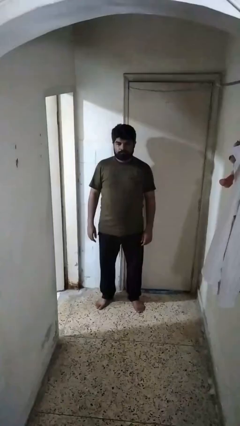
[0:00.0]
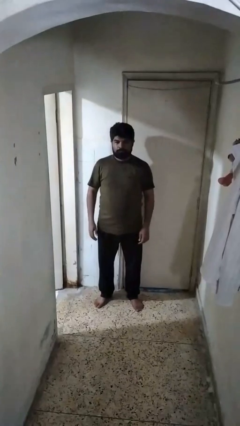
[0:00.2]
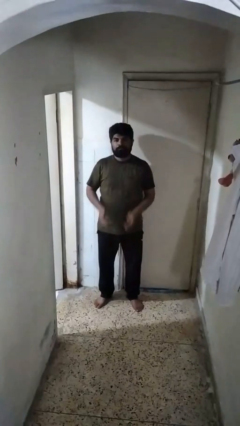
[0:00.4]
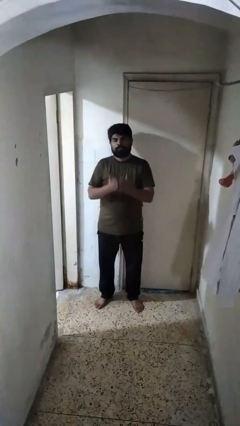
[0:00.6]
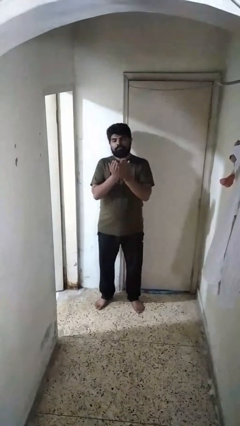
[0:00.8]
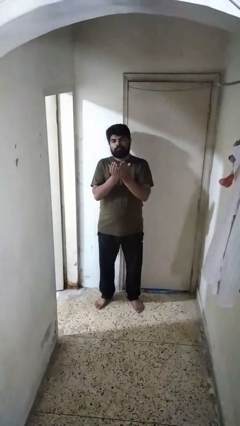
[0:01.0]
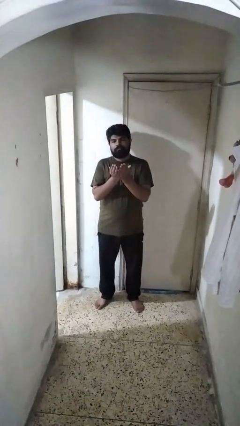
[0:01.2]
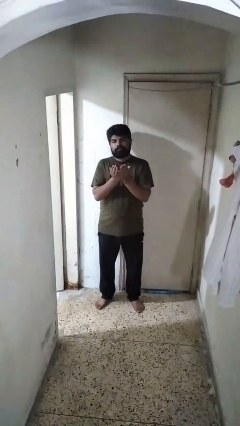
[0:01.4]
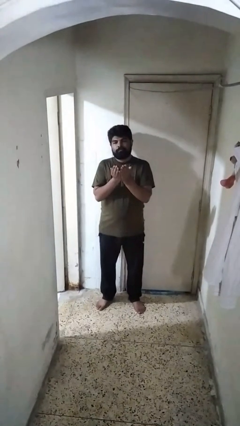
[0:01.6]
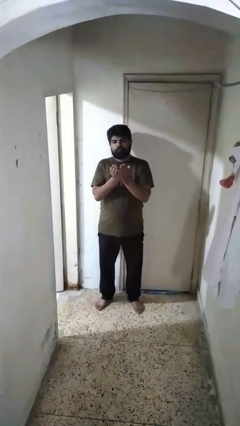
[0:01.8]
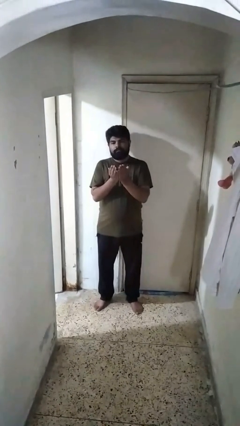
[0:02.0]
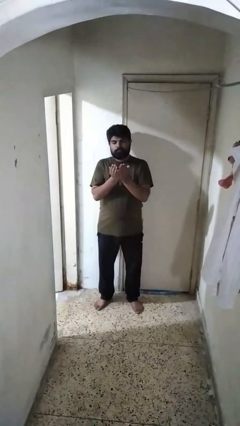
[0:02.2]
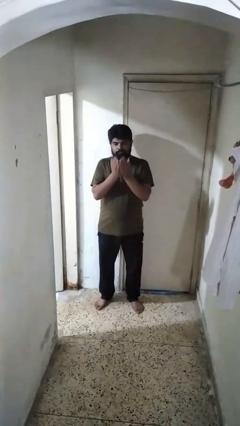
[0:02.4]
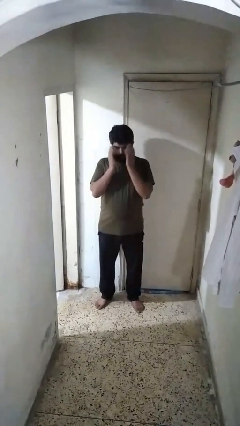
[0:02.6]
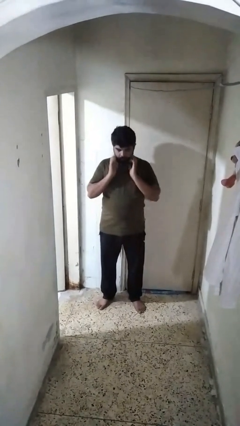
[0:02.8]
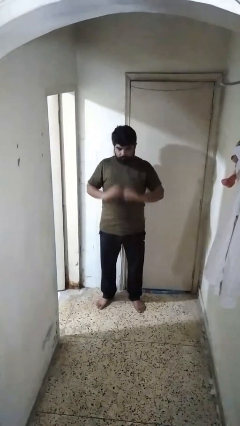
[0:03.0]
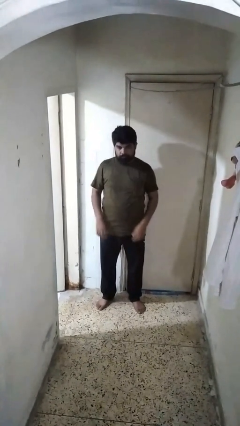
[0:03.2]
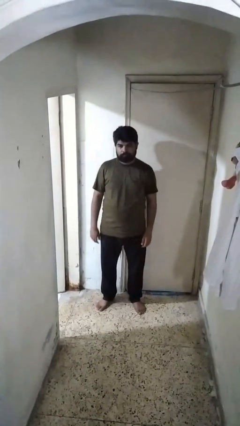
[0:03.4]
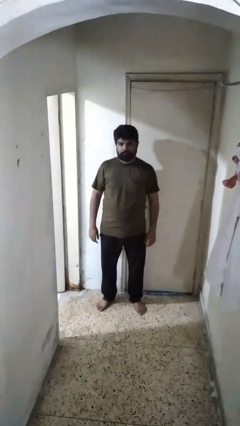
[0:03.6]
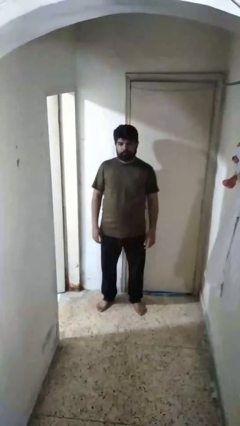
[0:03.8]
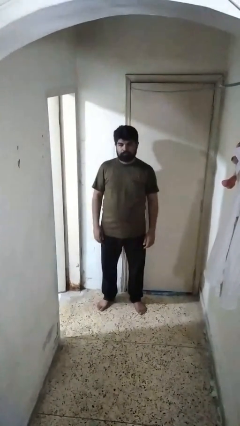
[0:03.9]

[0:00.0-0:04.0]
person prays

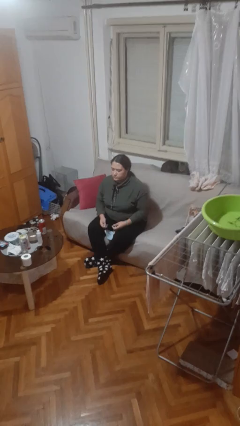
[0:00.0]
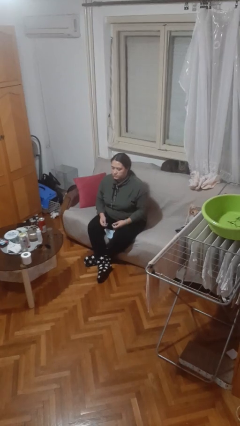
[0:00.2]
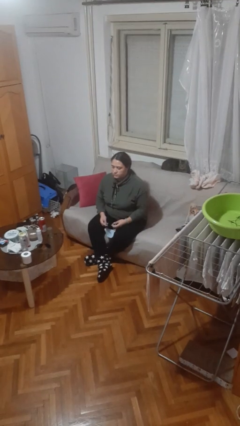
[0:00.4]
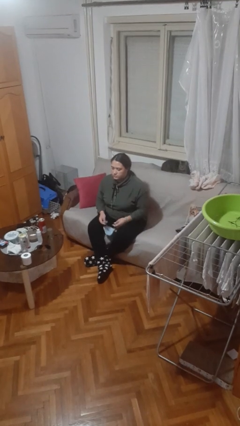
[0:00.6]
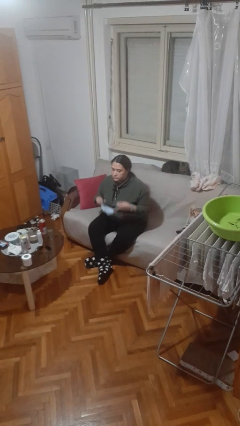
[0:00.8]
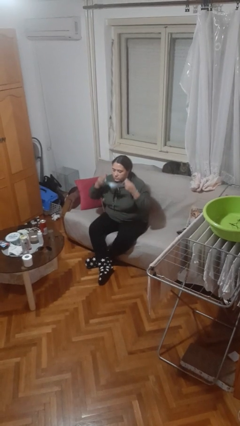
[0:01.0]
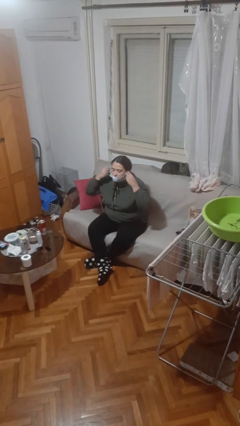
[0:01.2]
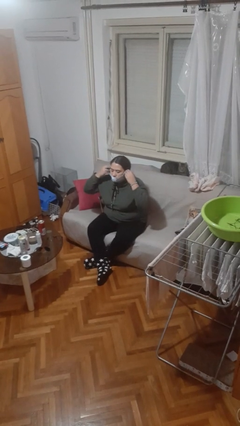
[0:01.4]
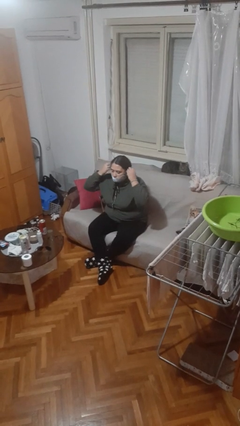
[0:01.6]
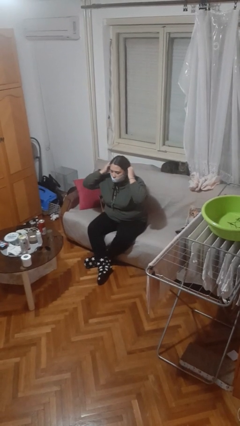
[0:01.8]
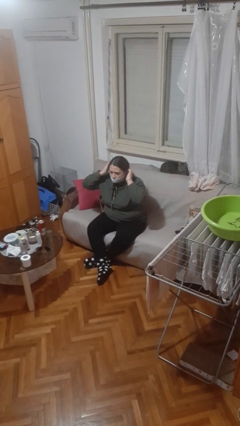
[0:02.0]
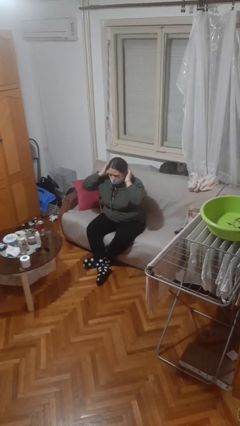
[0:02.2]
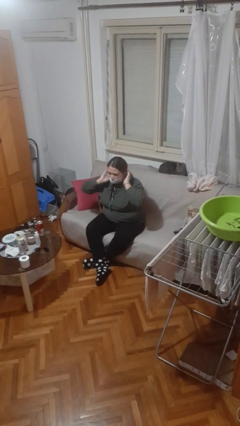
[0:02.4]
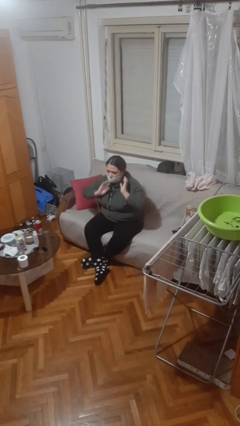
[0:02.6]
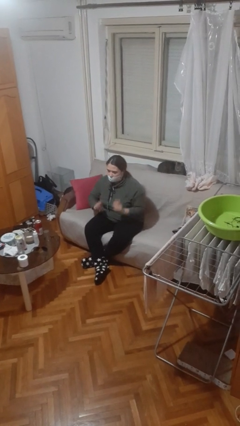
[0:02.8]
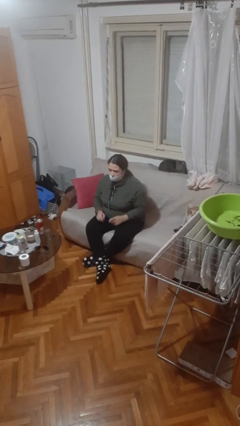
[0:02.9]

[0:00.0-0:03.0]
person puts on facemask

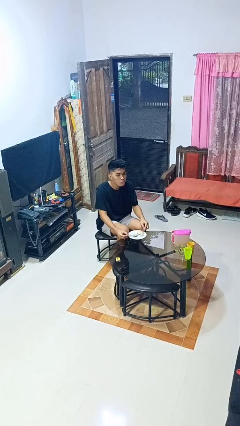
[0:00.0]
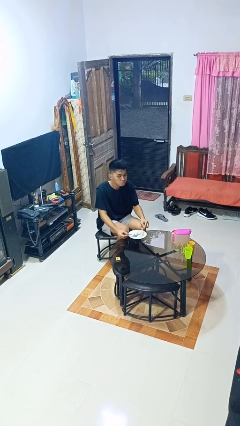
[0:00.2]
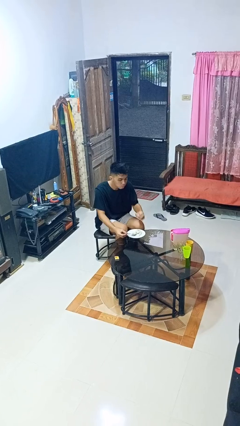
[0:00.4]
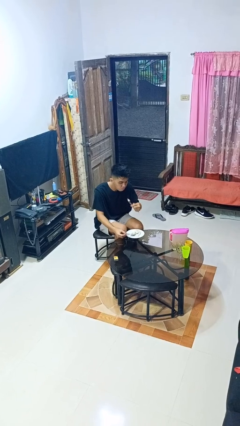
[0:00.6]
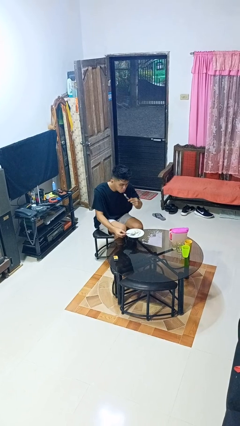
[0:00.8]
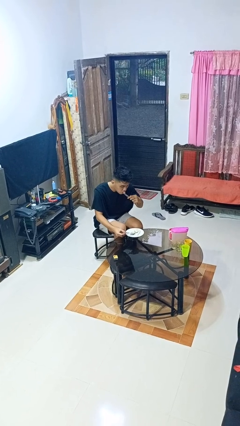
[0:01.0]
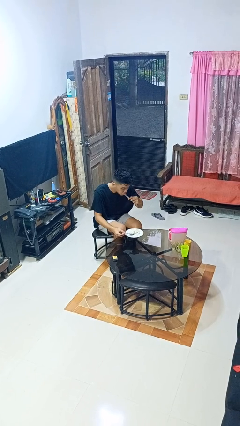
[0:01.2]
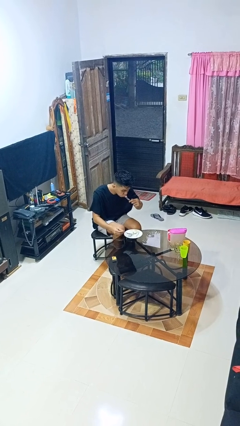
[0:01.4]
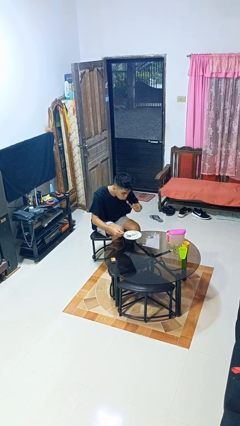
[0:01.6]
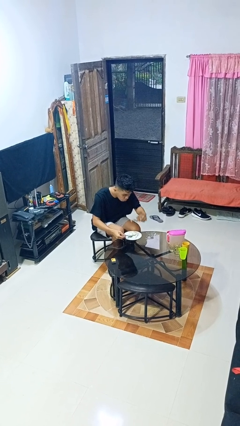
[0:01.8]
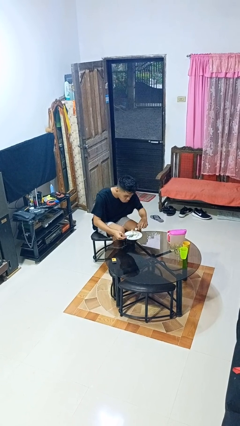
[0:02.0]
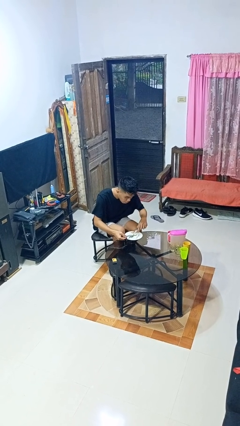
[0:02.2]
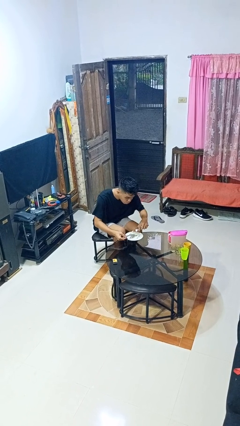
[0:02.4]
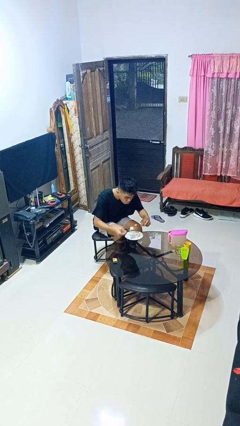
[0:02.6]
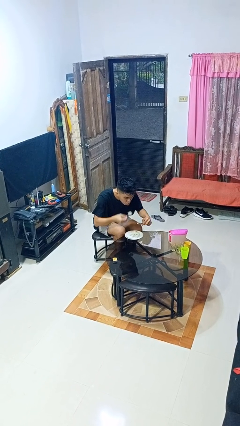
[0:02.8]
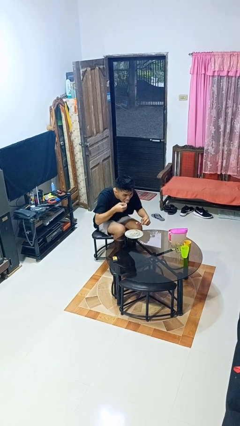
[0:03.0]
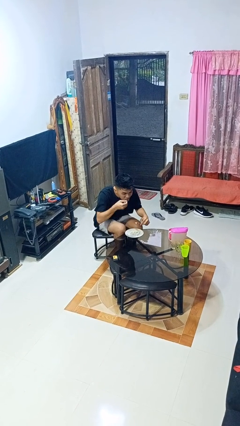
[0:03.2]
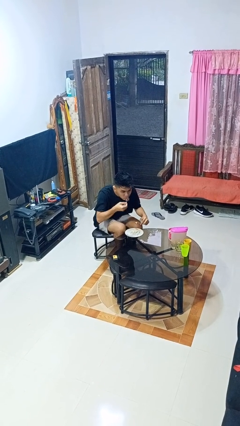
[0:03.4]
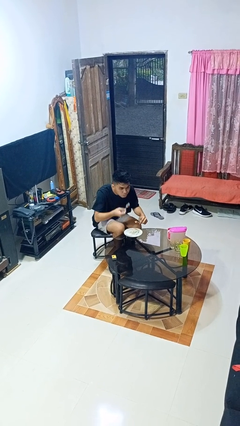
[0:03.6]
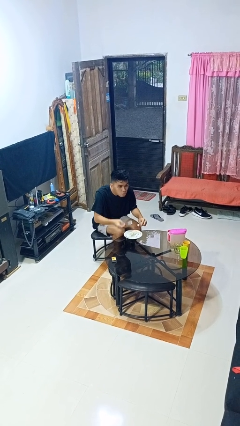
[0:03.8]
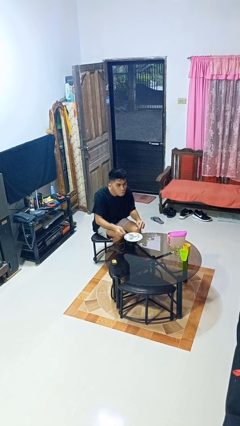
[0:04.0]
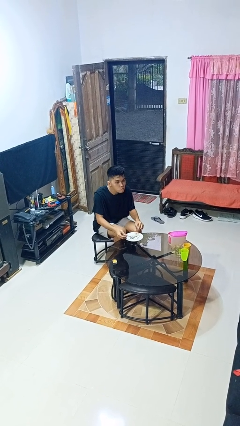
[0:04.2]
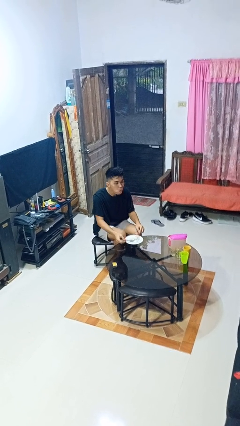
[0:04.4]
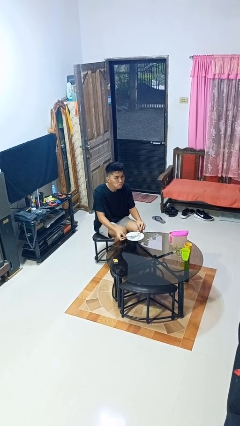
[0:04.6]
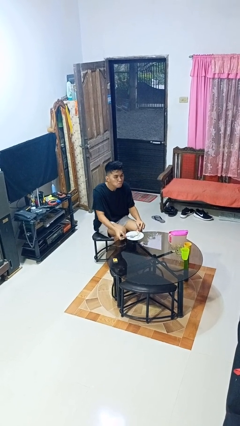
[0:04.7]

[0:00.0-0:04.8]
person eats with utensil

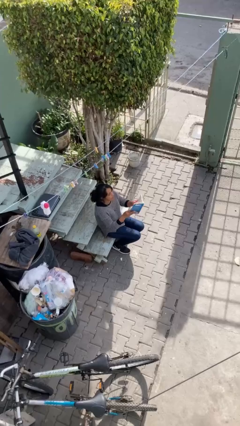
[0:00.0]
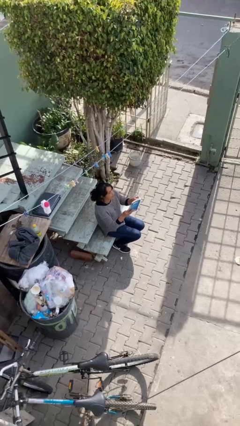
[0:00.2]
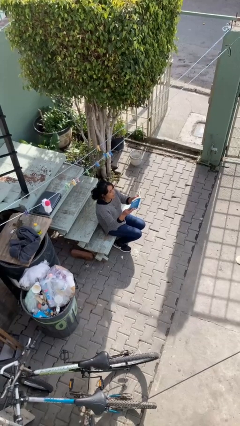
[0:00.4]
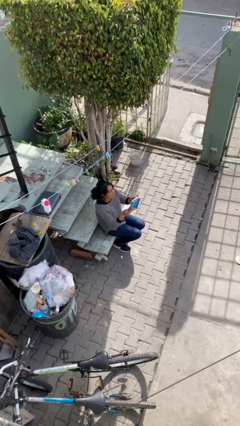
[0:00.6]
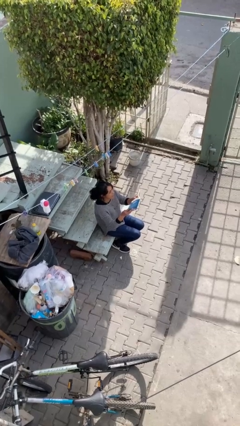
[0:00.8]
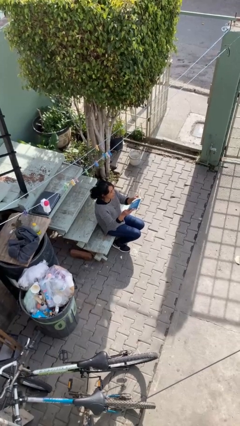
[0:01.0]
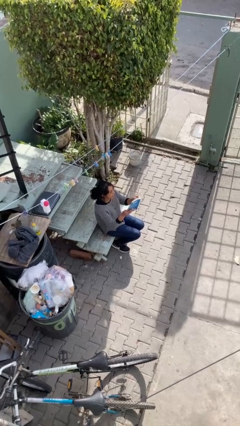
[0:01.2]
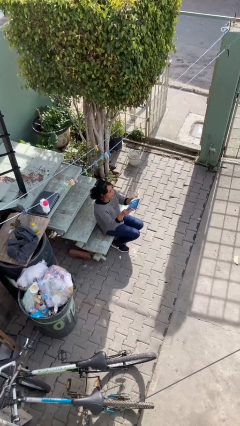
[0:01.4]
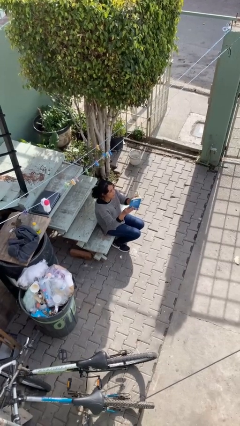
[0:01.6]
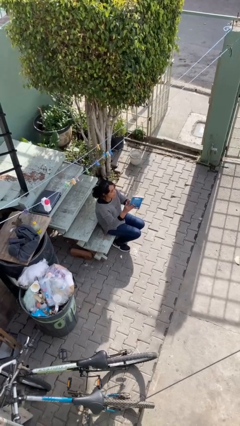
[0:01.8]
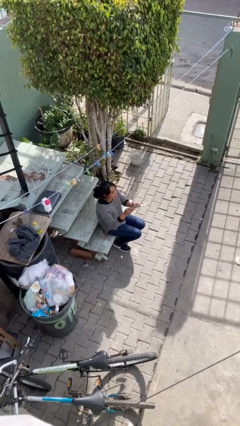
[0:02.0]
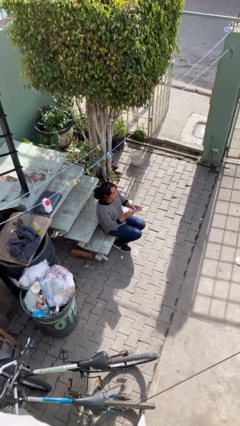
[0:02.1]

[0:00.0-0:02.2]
person reads document

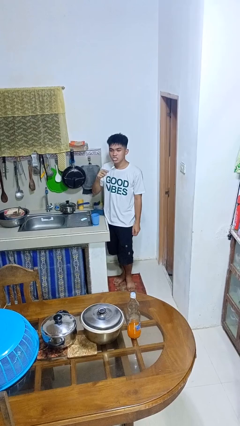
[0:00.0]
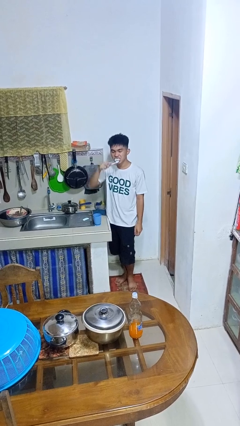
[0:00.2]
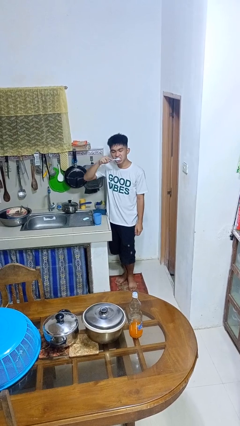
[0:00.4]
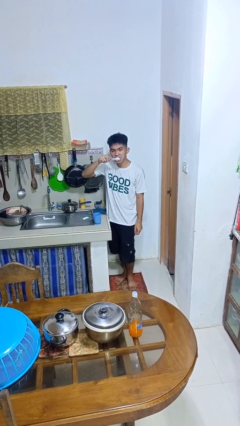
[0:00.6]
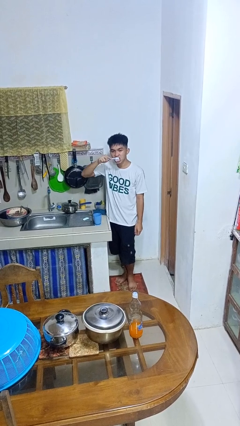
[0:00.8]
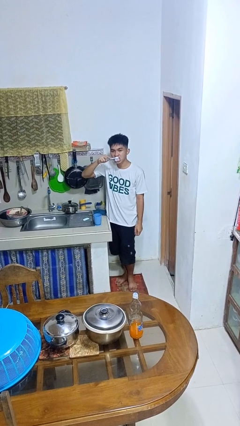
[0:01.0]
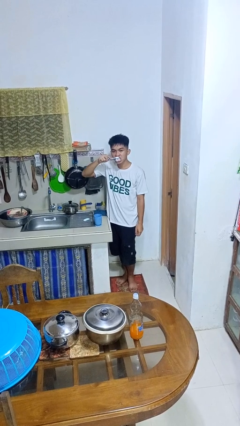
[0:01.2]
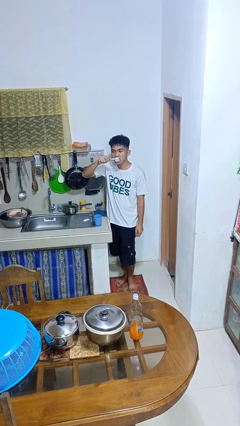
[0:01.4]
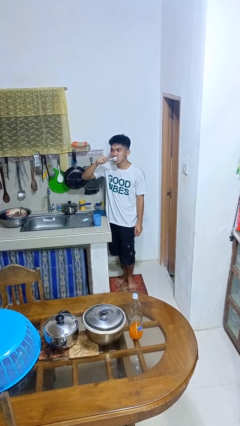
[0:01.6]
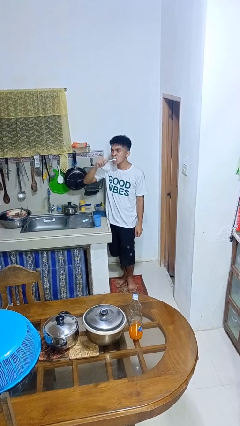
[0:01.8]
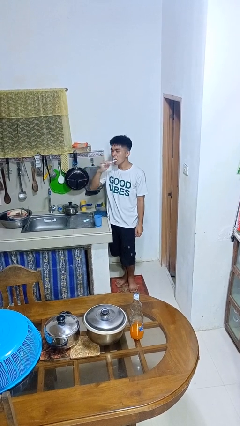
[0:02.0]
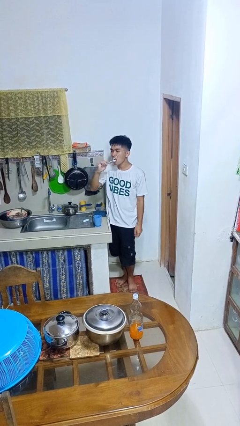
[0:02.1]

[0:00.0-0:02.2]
person brushes teeth

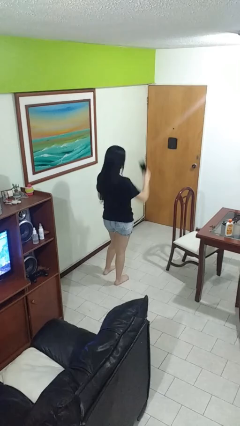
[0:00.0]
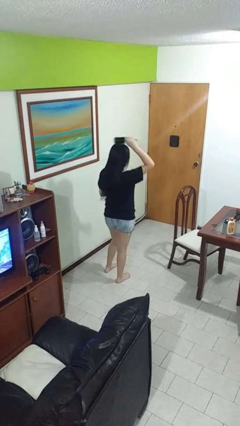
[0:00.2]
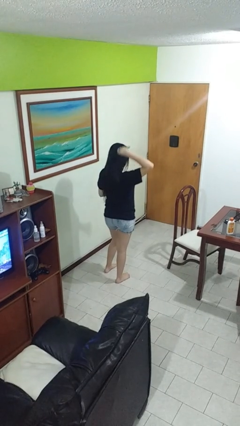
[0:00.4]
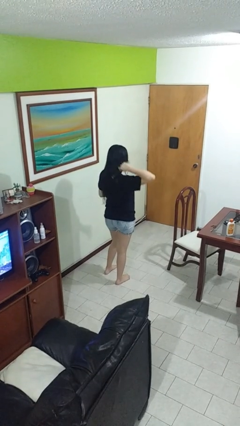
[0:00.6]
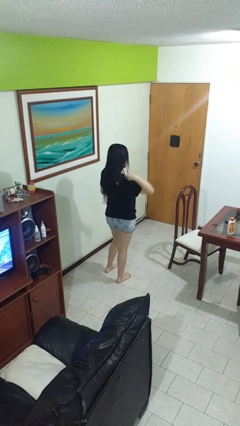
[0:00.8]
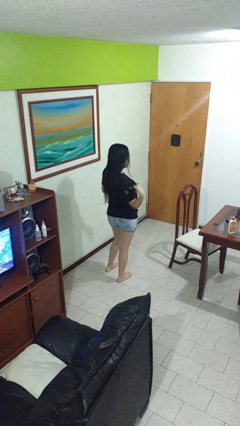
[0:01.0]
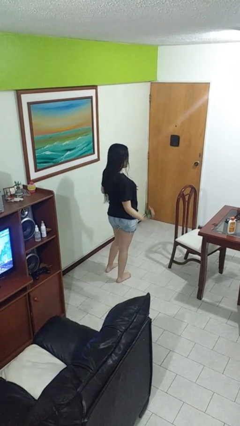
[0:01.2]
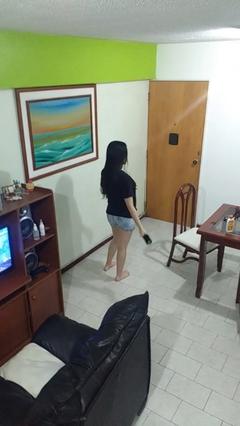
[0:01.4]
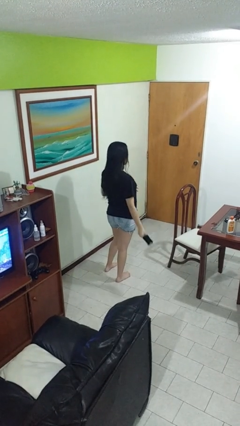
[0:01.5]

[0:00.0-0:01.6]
person brushes hair
